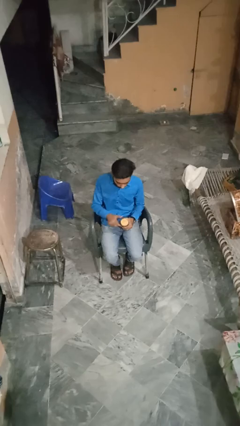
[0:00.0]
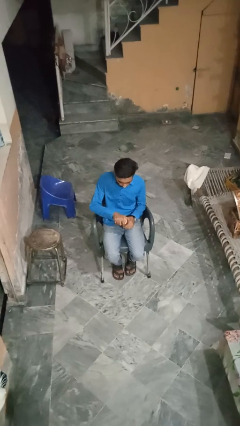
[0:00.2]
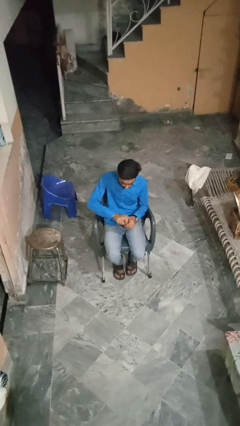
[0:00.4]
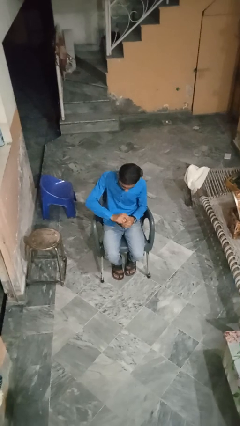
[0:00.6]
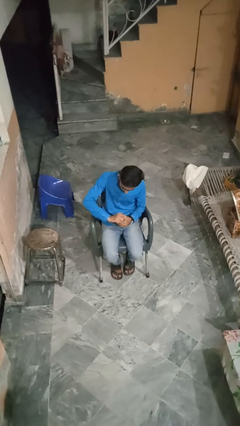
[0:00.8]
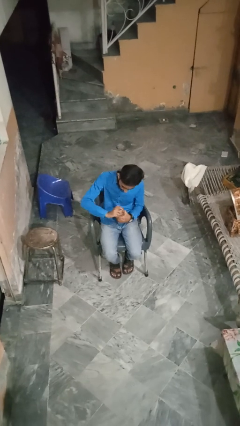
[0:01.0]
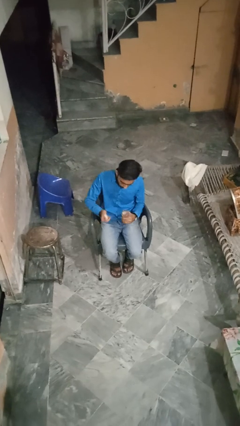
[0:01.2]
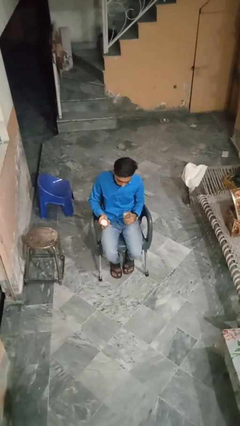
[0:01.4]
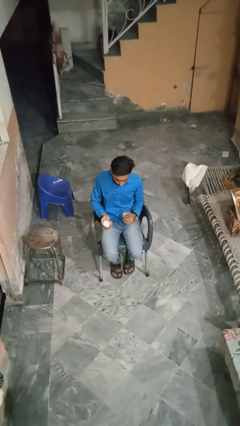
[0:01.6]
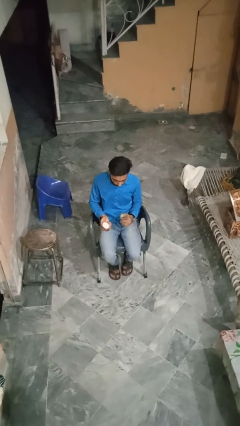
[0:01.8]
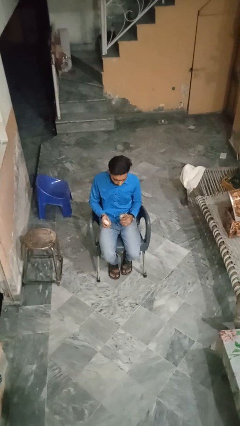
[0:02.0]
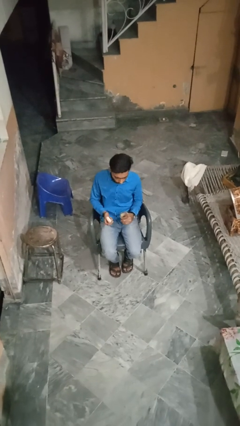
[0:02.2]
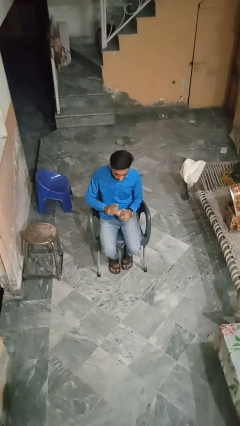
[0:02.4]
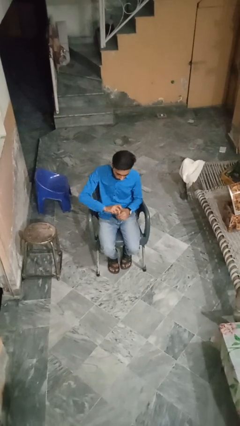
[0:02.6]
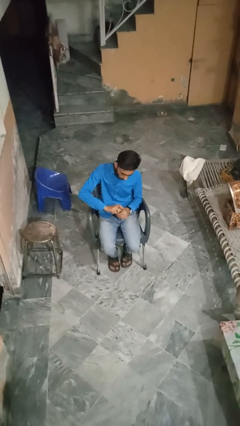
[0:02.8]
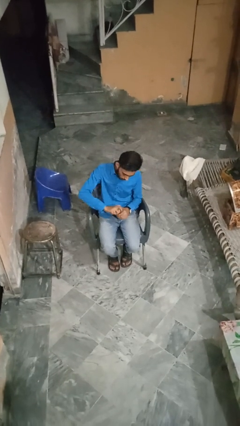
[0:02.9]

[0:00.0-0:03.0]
person opens jar

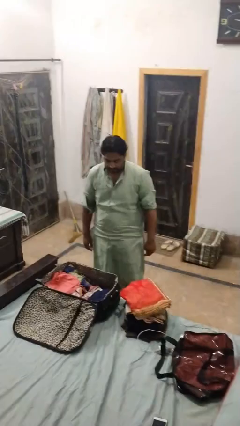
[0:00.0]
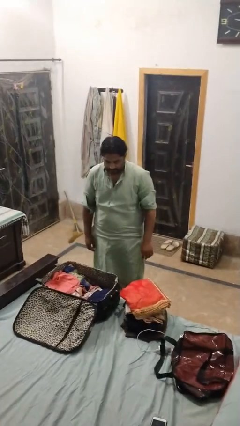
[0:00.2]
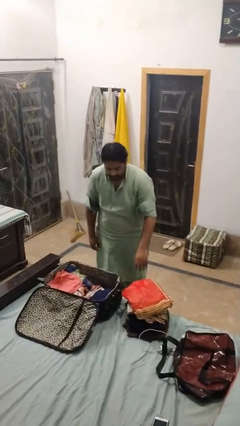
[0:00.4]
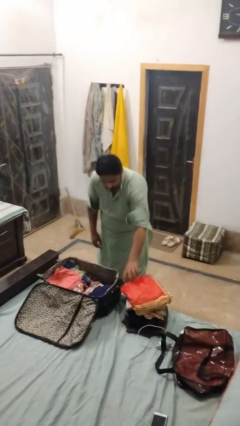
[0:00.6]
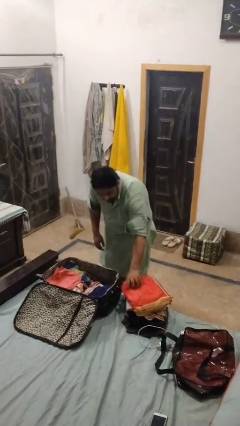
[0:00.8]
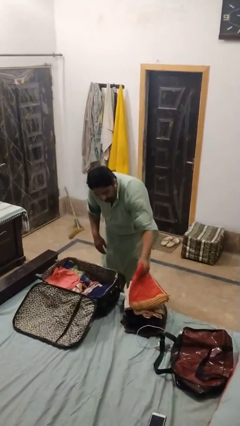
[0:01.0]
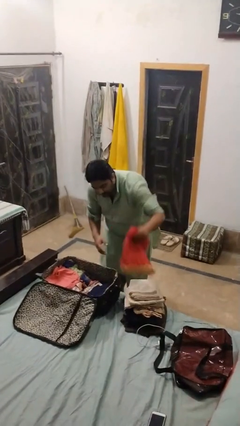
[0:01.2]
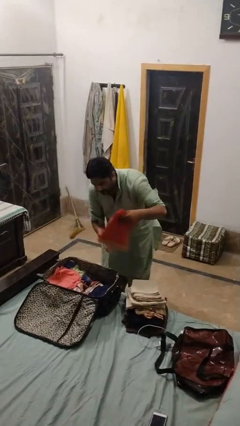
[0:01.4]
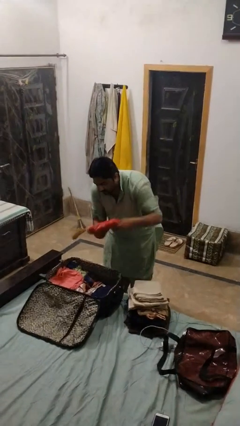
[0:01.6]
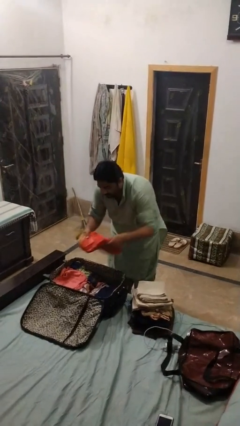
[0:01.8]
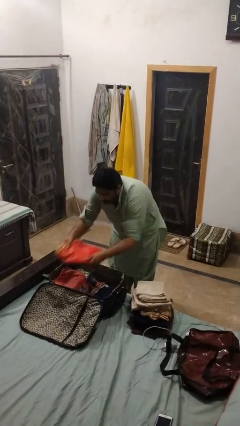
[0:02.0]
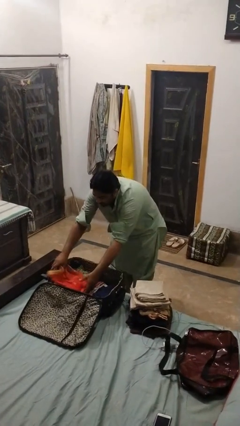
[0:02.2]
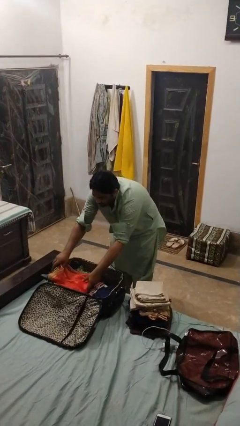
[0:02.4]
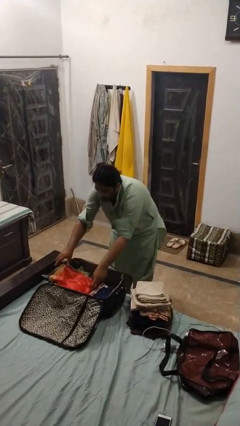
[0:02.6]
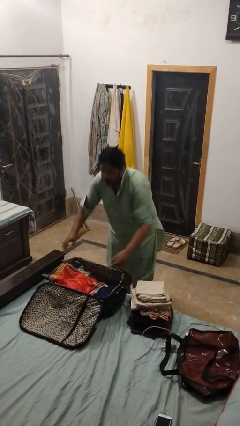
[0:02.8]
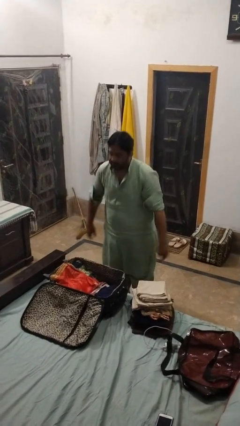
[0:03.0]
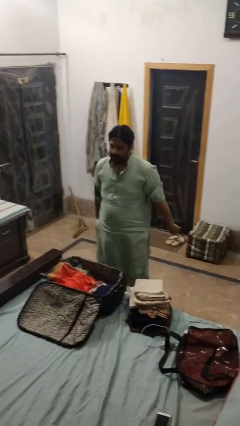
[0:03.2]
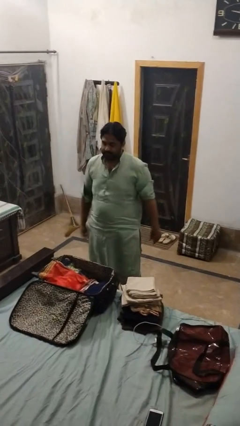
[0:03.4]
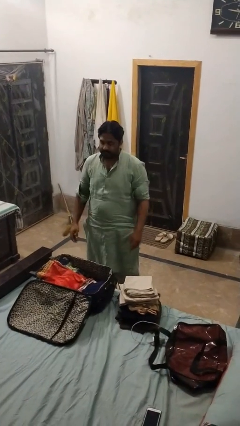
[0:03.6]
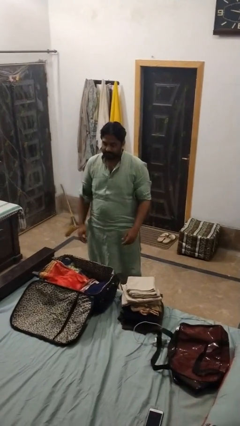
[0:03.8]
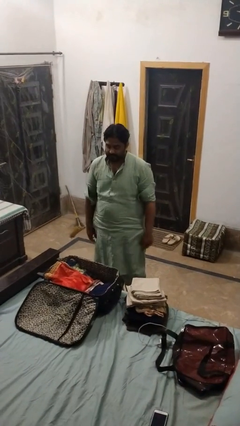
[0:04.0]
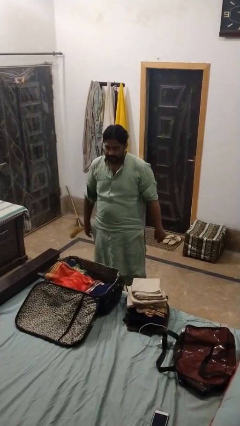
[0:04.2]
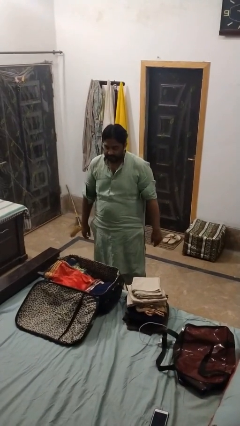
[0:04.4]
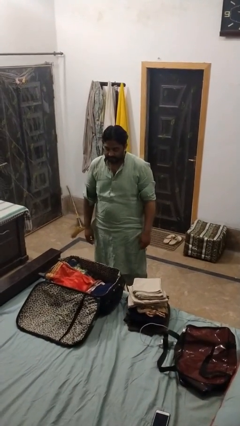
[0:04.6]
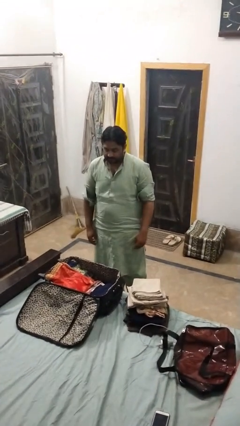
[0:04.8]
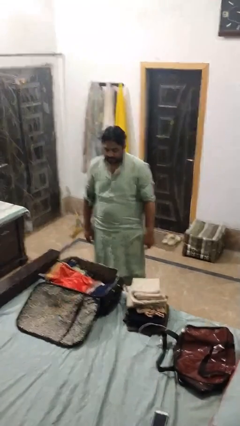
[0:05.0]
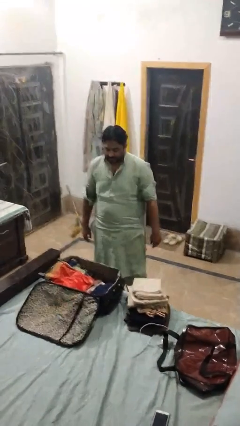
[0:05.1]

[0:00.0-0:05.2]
person loads clothes into suitcase

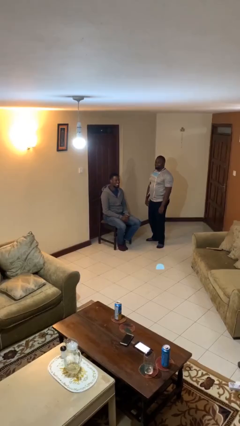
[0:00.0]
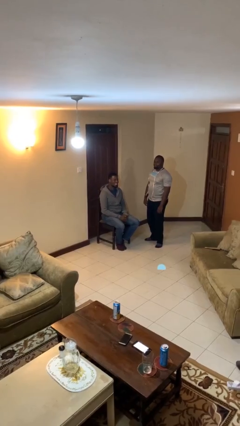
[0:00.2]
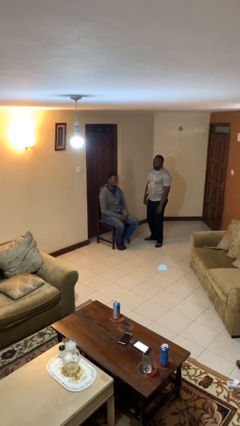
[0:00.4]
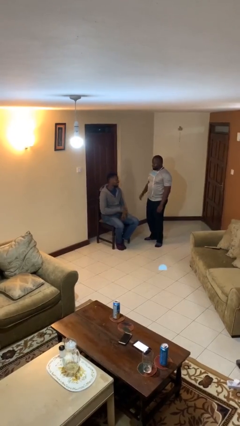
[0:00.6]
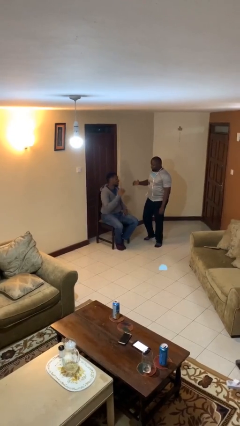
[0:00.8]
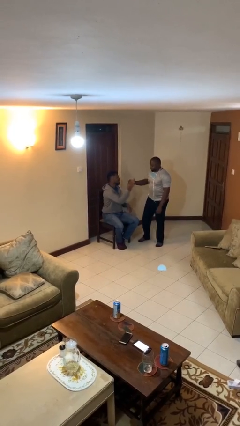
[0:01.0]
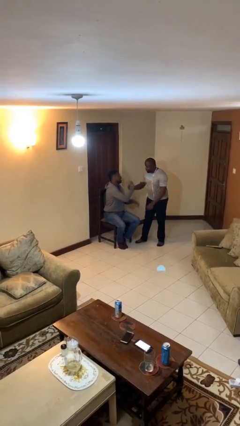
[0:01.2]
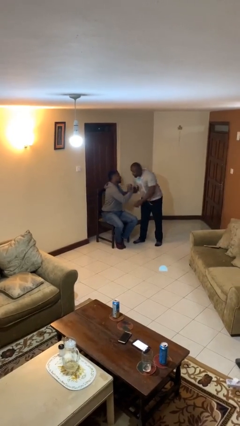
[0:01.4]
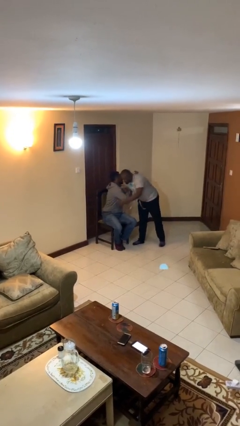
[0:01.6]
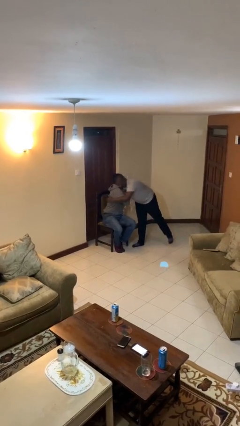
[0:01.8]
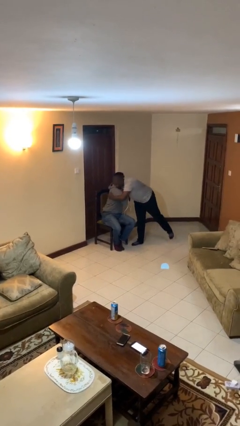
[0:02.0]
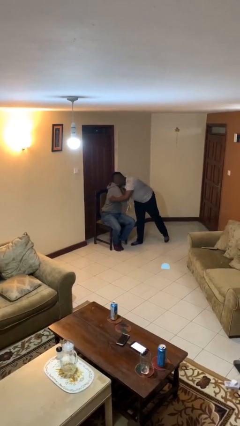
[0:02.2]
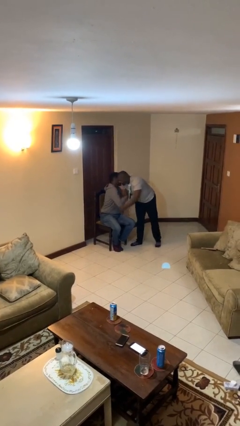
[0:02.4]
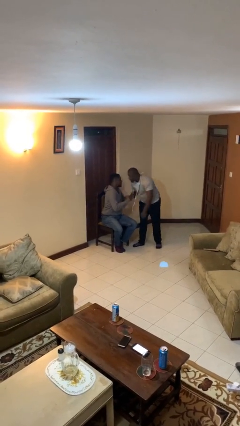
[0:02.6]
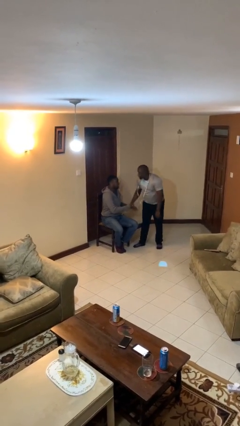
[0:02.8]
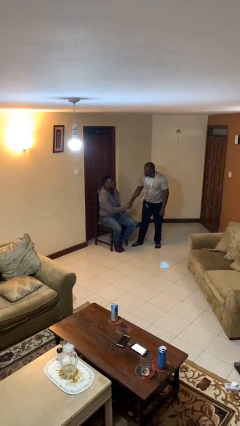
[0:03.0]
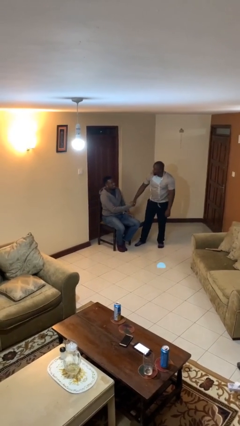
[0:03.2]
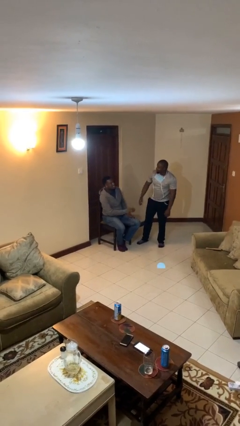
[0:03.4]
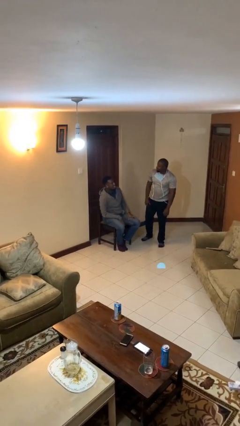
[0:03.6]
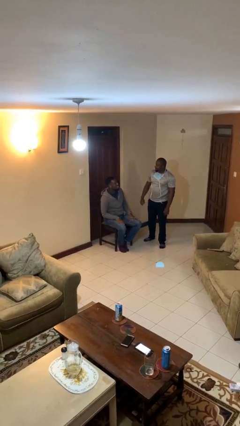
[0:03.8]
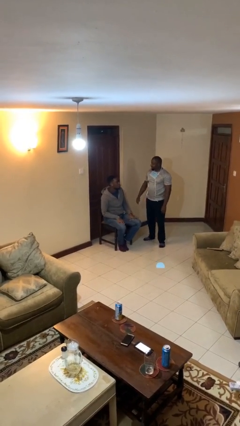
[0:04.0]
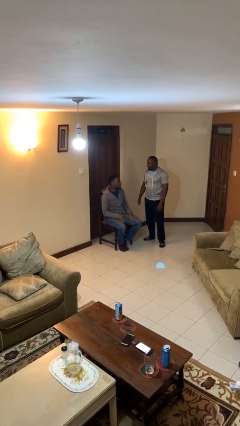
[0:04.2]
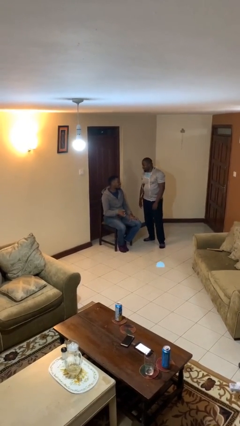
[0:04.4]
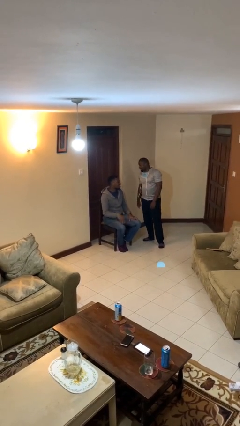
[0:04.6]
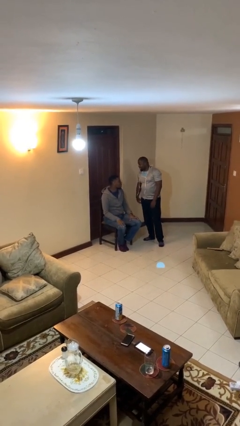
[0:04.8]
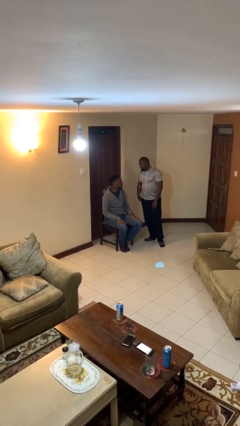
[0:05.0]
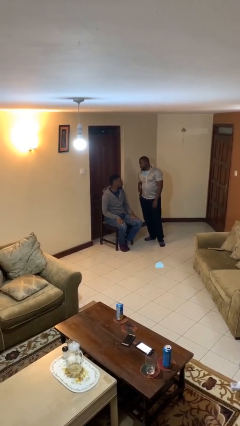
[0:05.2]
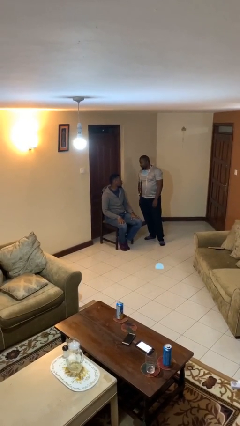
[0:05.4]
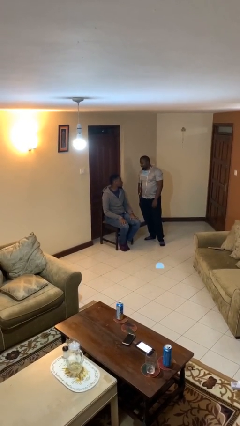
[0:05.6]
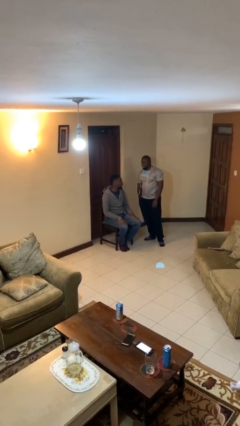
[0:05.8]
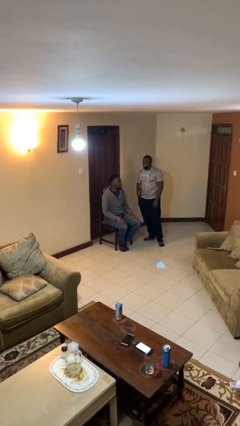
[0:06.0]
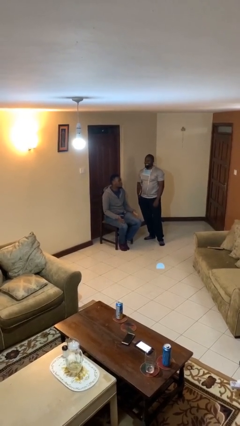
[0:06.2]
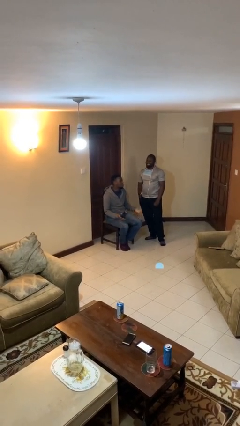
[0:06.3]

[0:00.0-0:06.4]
person embraces person

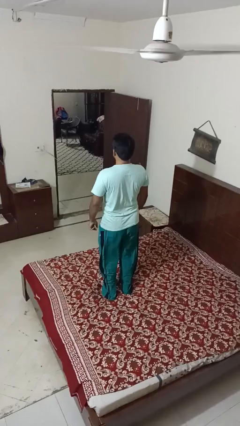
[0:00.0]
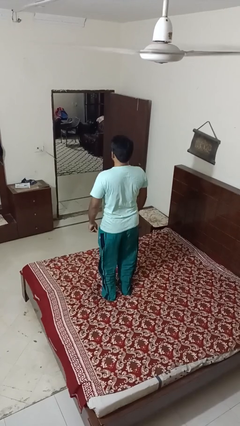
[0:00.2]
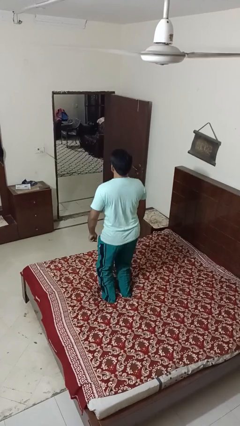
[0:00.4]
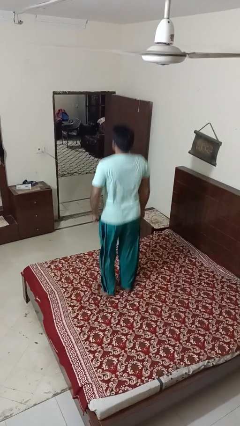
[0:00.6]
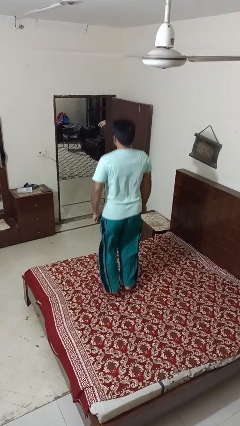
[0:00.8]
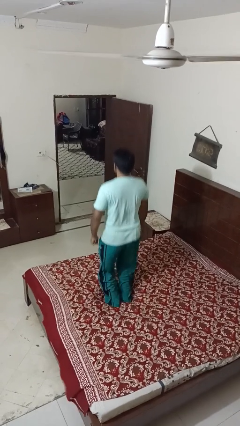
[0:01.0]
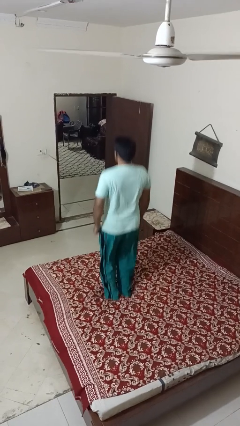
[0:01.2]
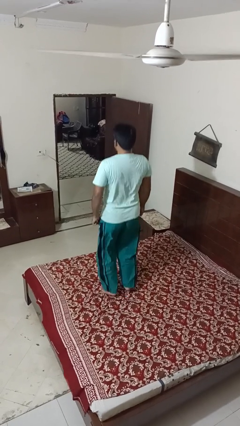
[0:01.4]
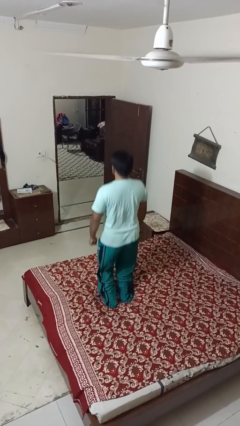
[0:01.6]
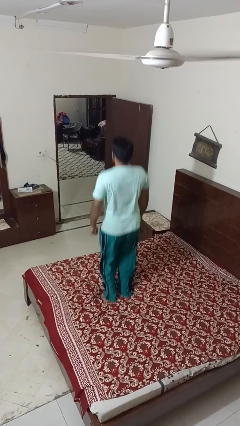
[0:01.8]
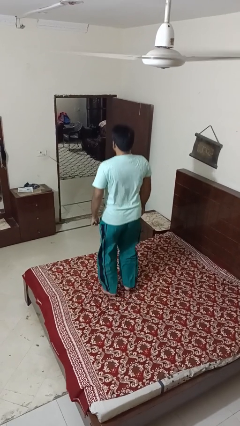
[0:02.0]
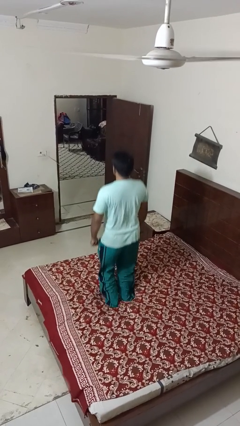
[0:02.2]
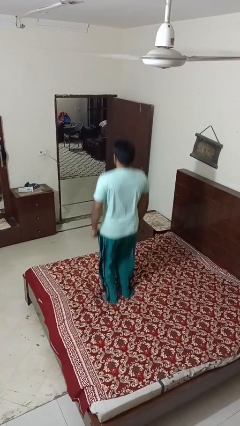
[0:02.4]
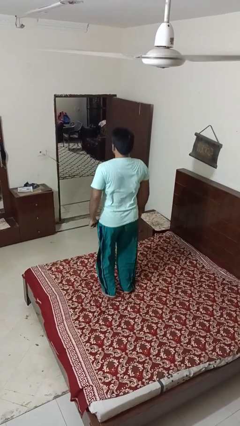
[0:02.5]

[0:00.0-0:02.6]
person jumps on bed

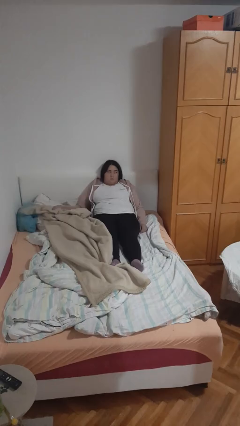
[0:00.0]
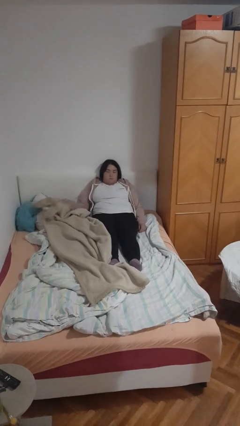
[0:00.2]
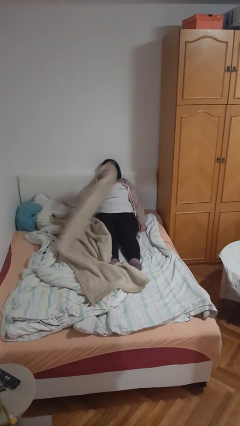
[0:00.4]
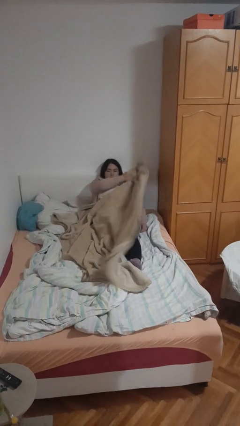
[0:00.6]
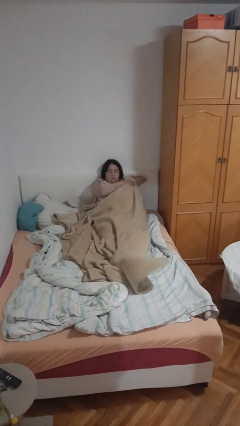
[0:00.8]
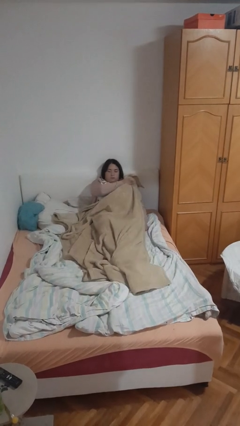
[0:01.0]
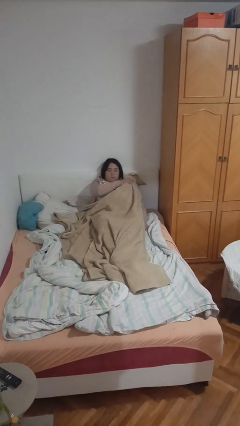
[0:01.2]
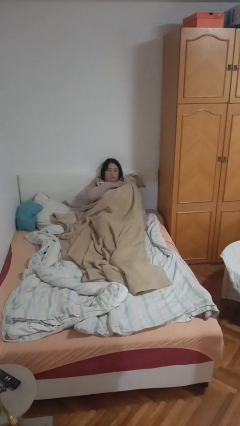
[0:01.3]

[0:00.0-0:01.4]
person covers with blanket
